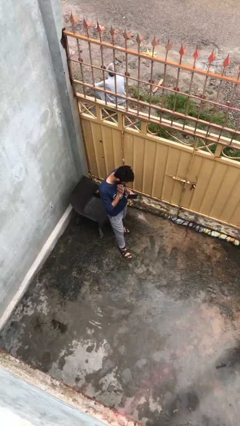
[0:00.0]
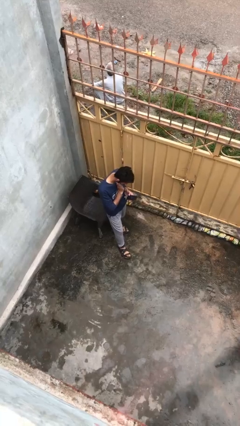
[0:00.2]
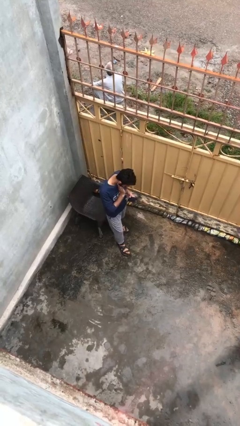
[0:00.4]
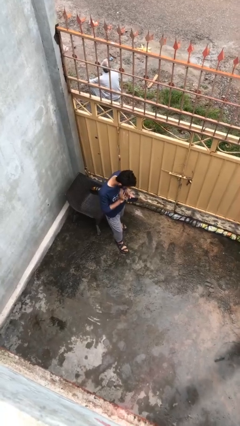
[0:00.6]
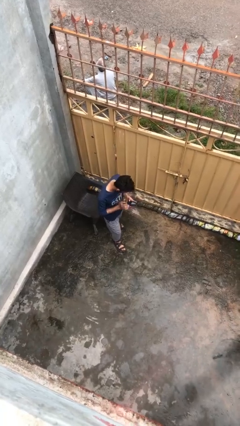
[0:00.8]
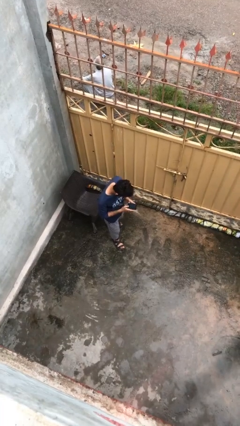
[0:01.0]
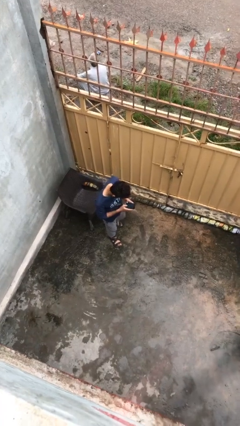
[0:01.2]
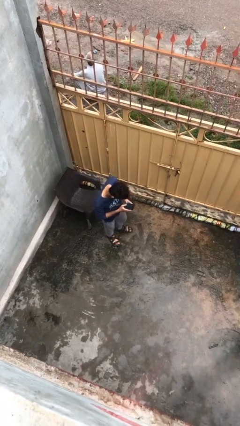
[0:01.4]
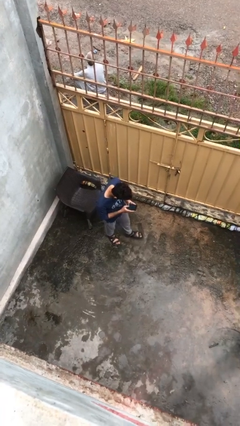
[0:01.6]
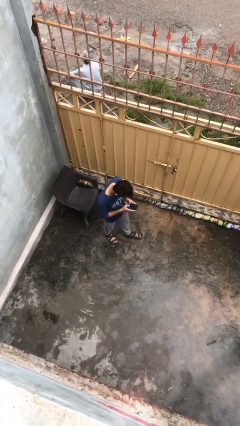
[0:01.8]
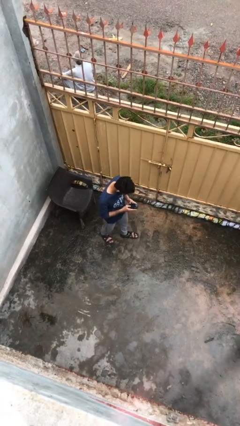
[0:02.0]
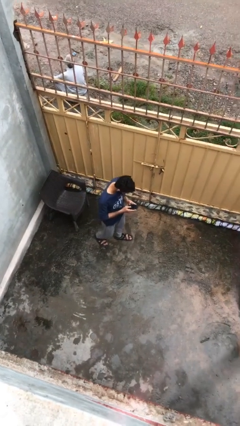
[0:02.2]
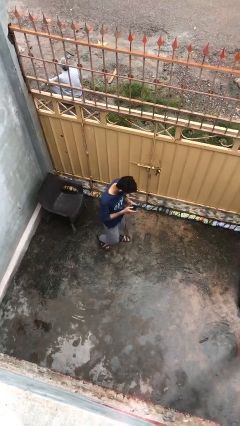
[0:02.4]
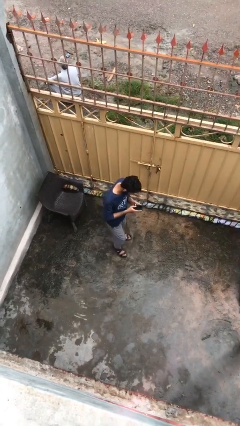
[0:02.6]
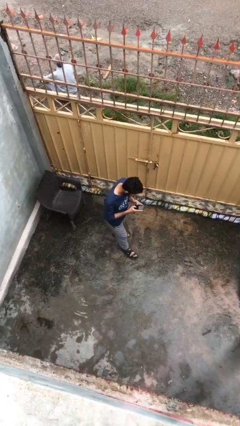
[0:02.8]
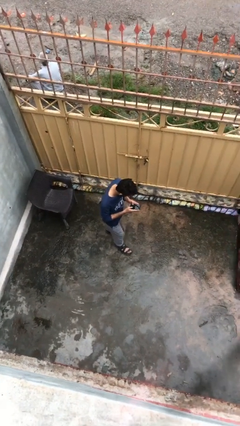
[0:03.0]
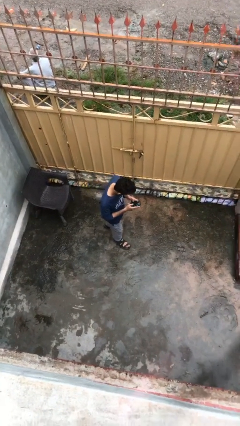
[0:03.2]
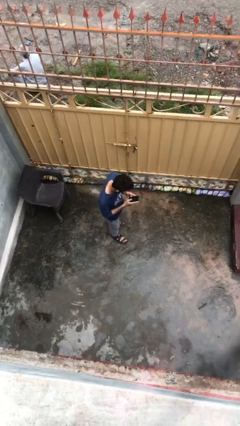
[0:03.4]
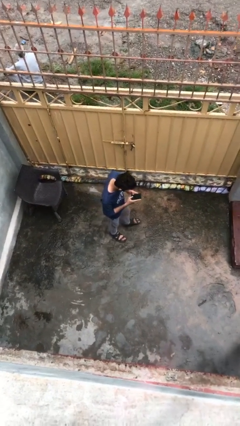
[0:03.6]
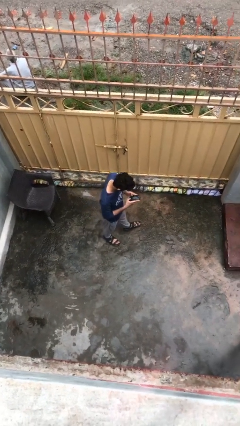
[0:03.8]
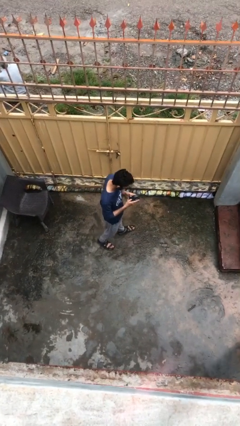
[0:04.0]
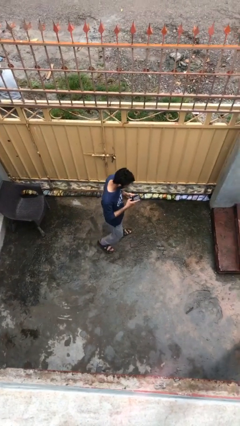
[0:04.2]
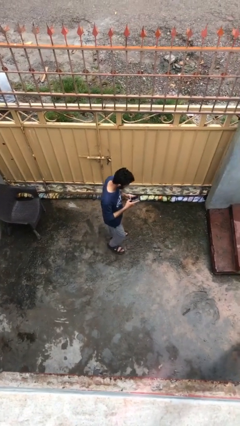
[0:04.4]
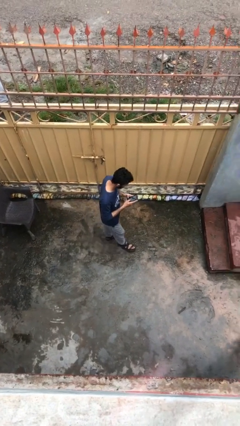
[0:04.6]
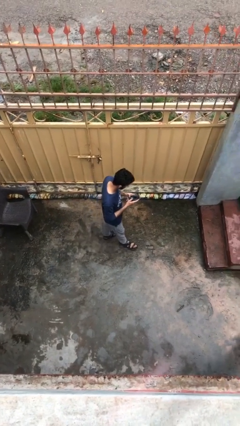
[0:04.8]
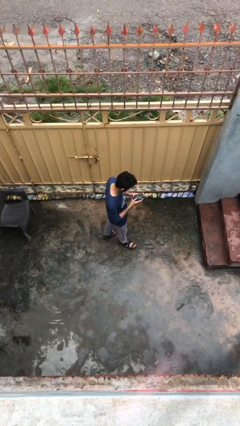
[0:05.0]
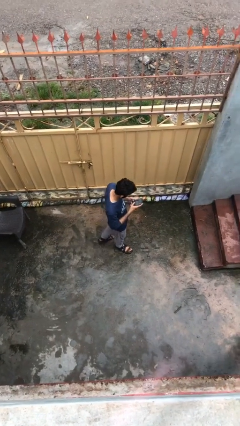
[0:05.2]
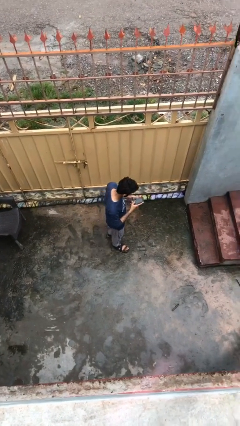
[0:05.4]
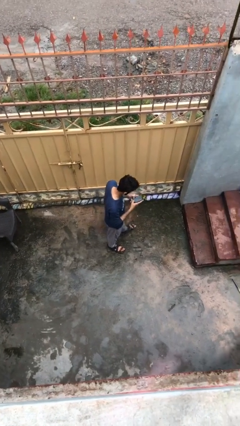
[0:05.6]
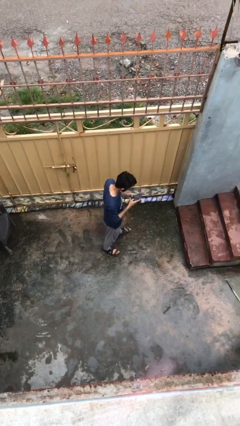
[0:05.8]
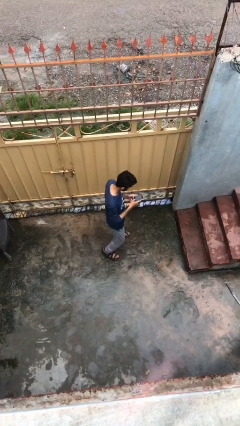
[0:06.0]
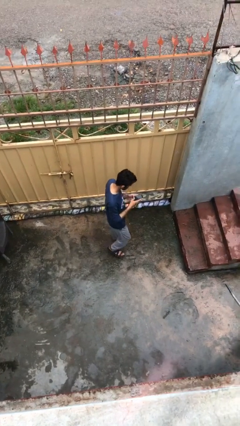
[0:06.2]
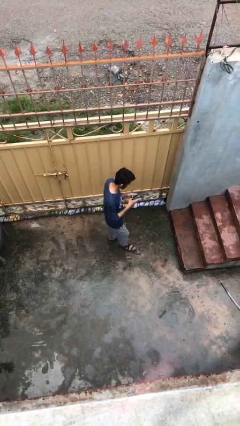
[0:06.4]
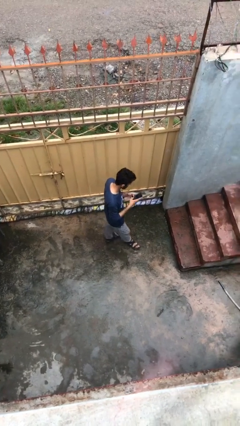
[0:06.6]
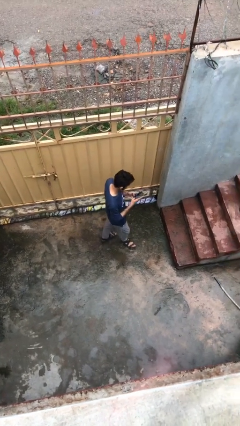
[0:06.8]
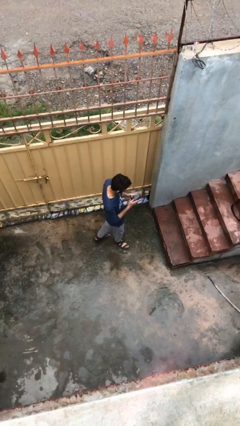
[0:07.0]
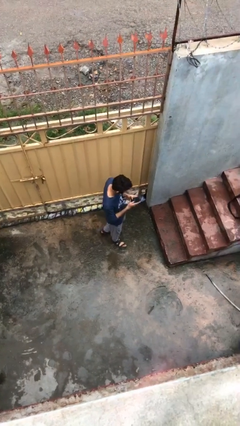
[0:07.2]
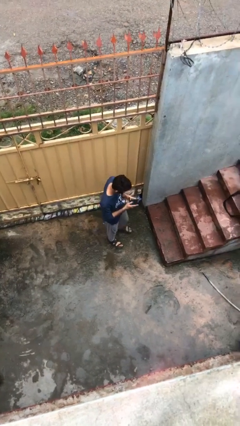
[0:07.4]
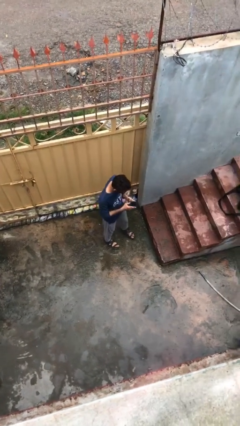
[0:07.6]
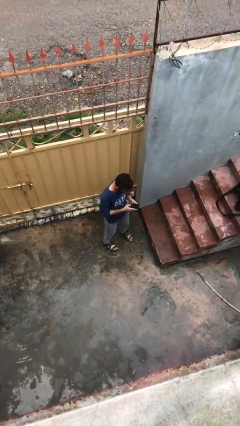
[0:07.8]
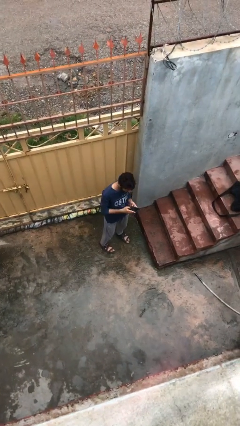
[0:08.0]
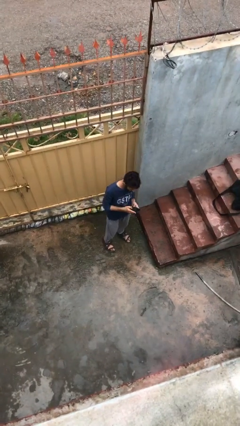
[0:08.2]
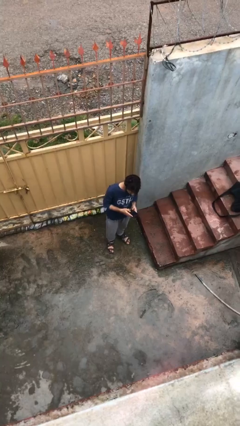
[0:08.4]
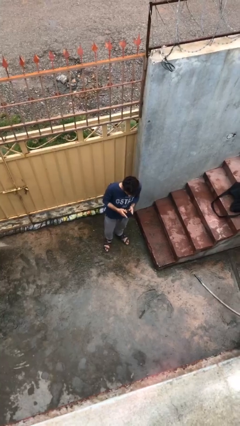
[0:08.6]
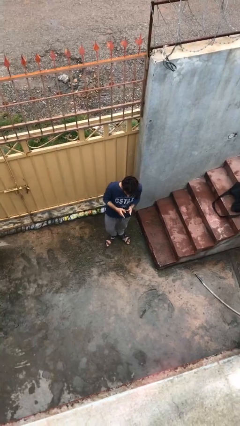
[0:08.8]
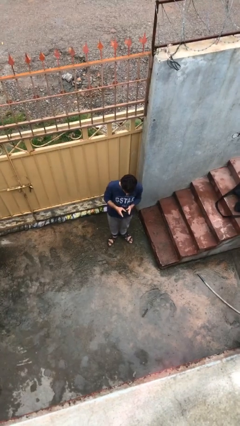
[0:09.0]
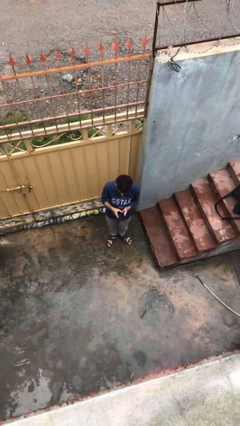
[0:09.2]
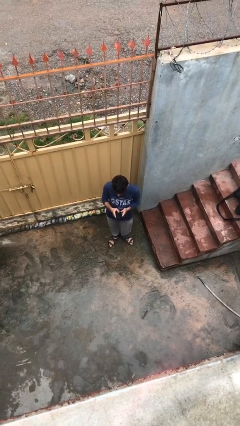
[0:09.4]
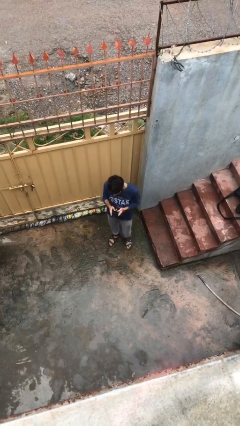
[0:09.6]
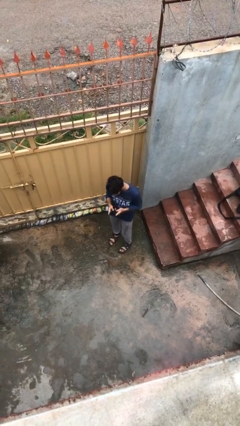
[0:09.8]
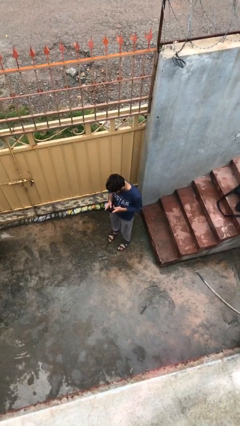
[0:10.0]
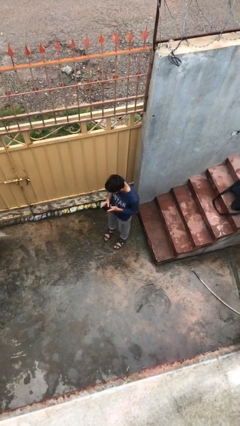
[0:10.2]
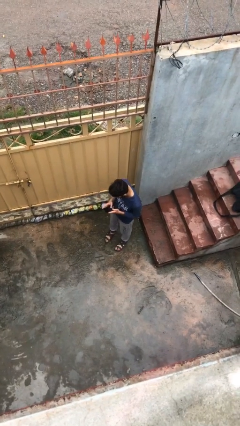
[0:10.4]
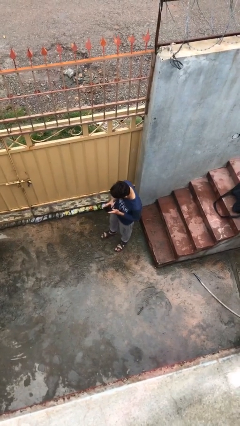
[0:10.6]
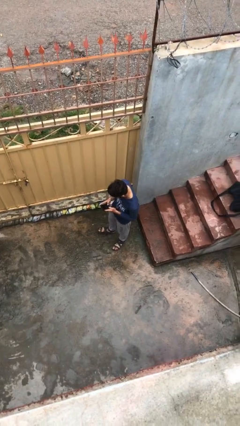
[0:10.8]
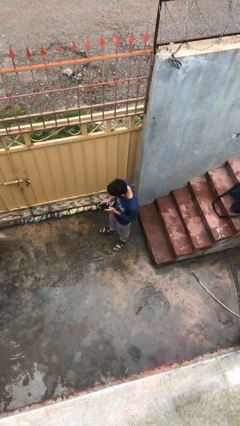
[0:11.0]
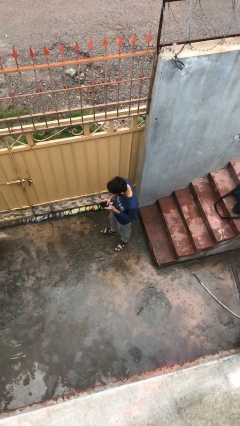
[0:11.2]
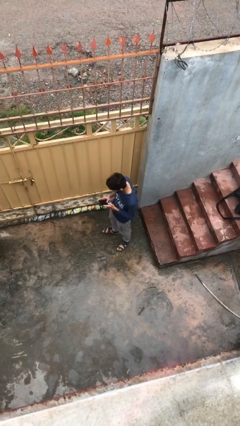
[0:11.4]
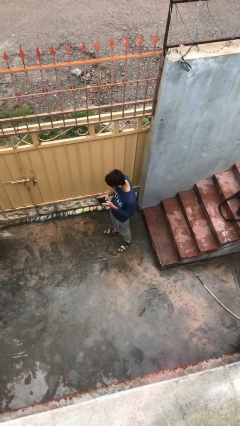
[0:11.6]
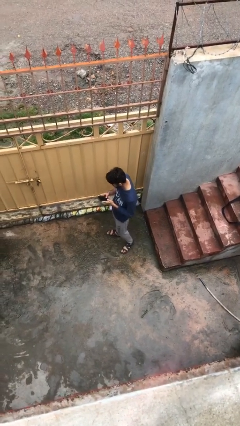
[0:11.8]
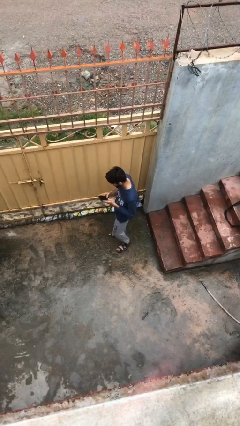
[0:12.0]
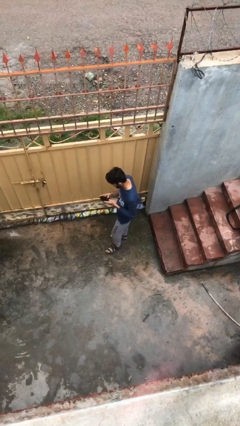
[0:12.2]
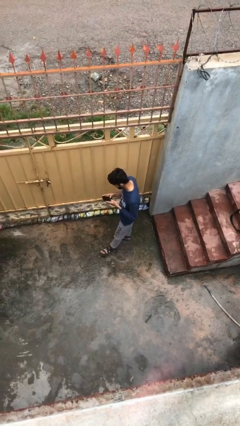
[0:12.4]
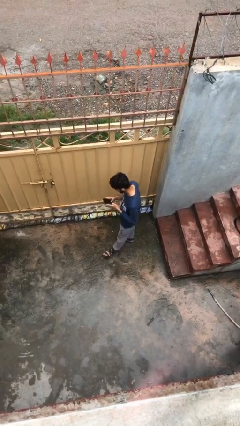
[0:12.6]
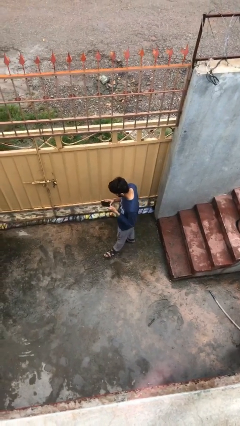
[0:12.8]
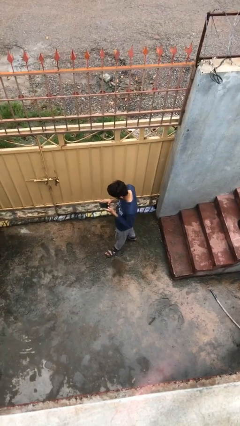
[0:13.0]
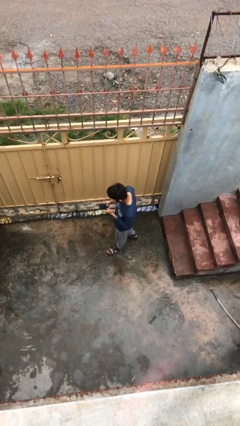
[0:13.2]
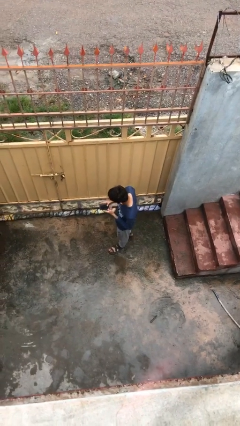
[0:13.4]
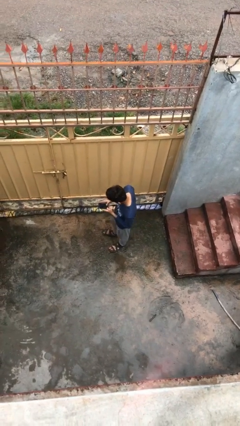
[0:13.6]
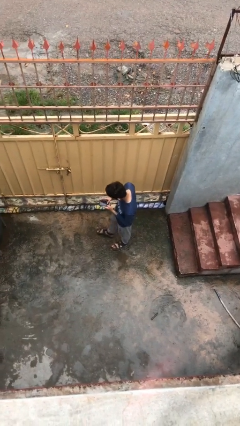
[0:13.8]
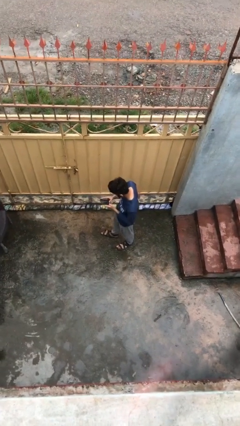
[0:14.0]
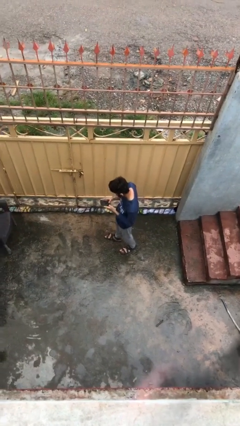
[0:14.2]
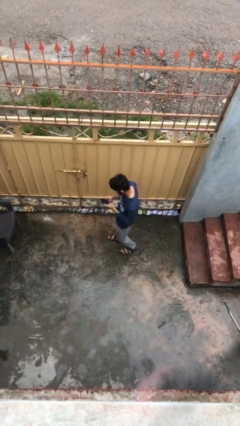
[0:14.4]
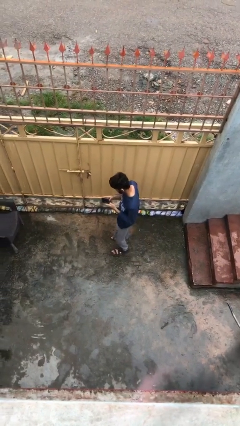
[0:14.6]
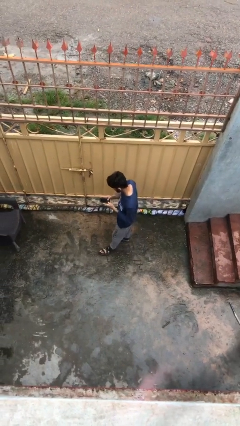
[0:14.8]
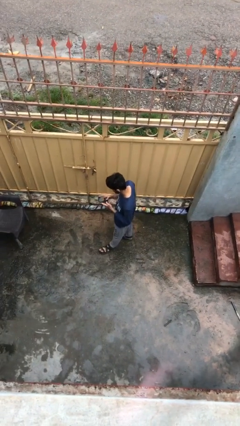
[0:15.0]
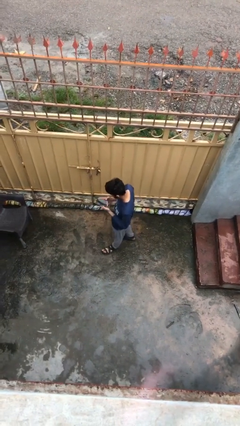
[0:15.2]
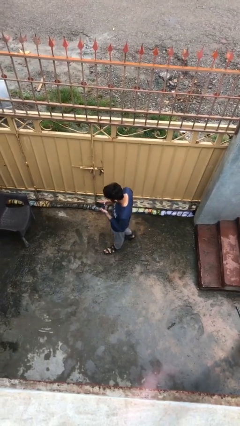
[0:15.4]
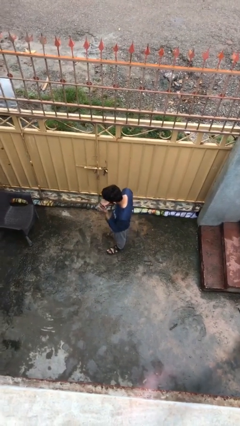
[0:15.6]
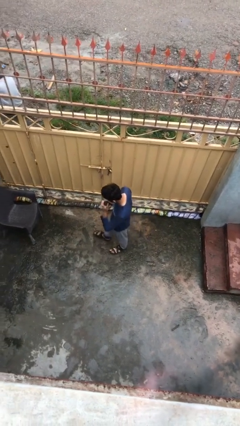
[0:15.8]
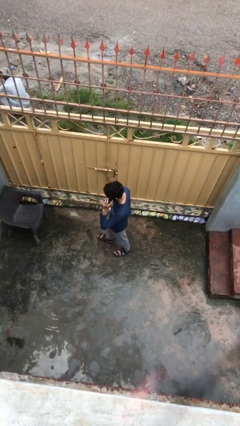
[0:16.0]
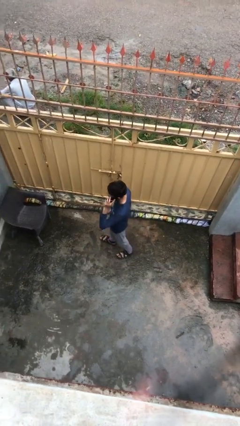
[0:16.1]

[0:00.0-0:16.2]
person texts on phone

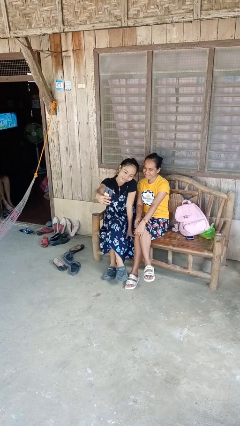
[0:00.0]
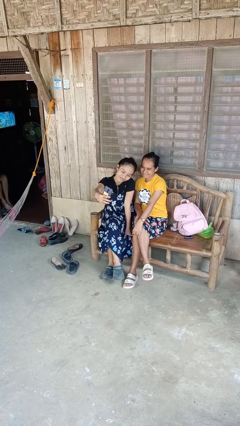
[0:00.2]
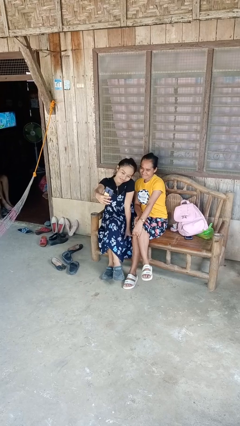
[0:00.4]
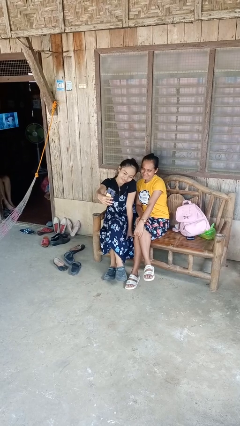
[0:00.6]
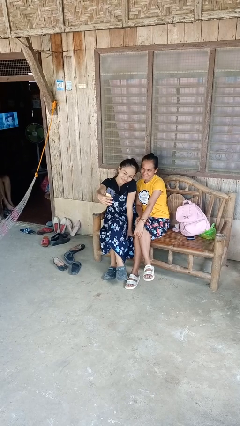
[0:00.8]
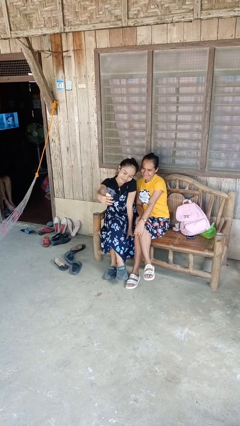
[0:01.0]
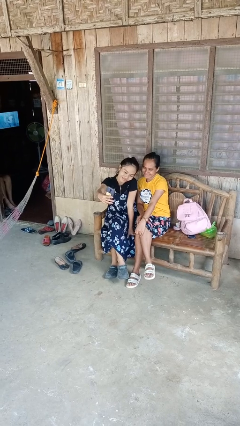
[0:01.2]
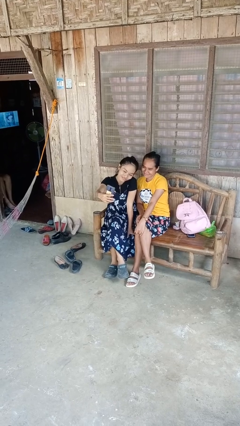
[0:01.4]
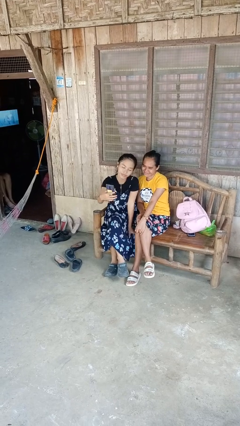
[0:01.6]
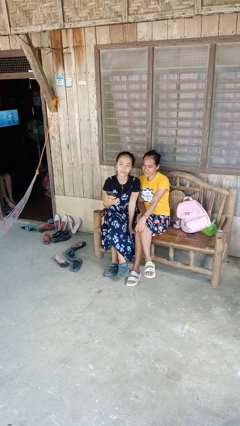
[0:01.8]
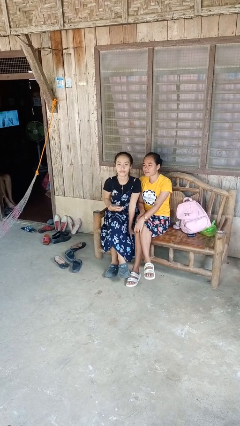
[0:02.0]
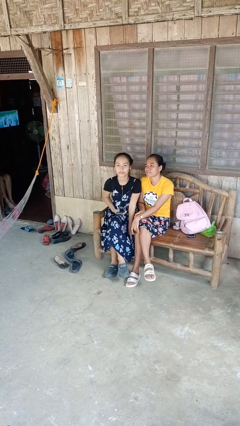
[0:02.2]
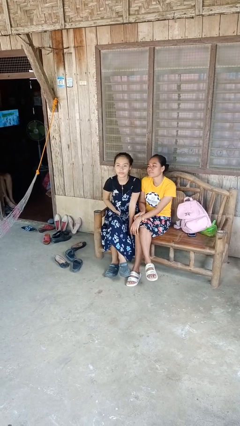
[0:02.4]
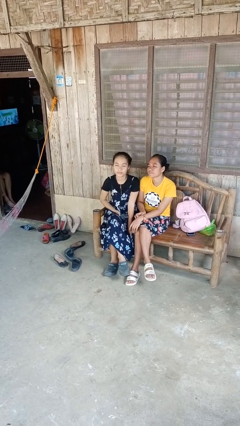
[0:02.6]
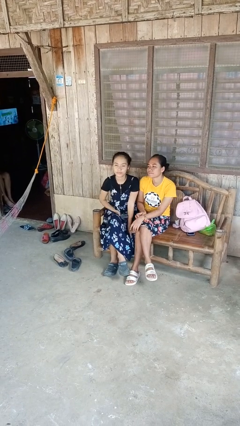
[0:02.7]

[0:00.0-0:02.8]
person takes selfie with person
